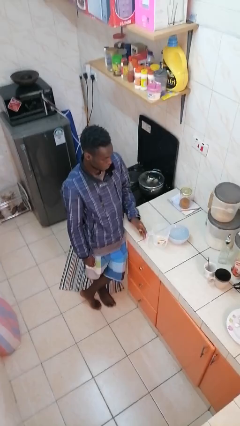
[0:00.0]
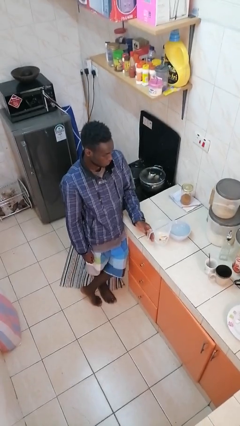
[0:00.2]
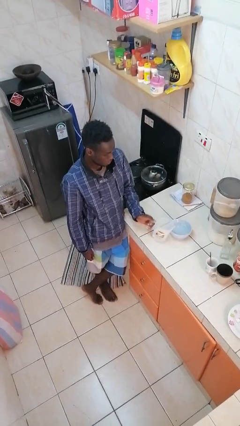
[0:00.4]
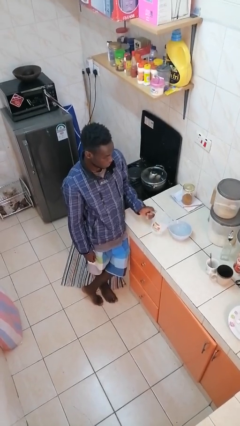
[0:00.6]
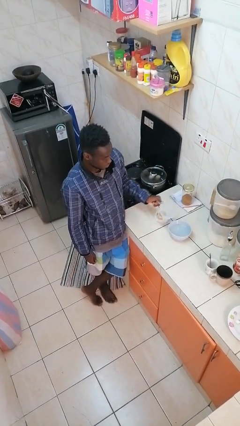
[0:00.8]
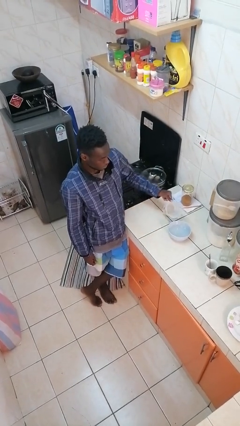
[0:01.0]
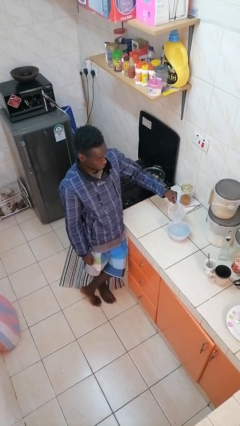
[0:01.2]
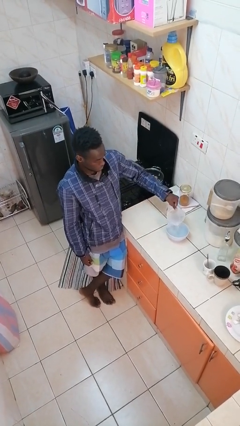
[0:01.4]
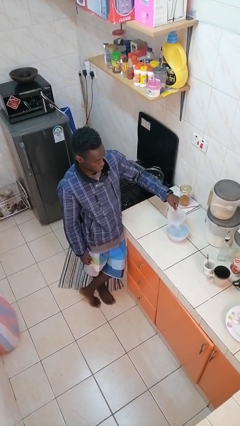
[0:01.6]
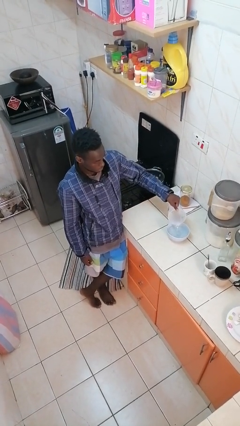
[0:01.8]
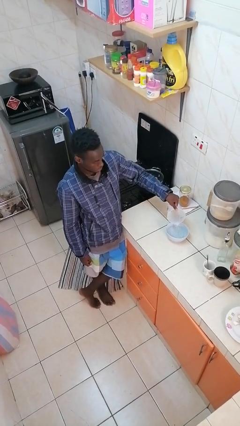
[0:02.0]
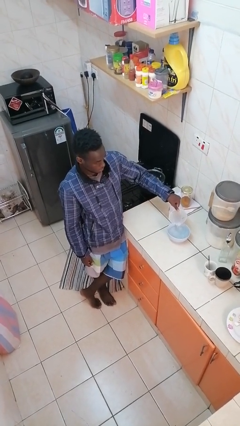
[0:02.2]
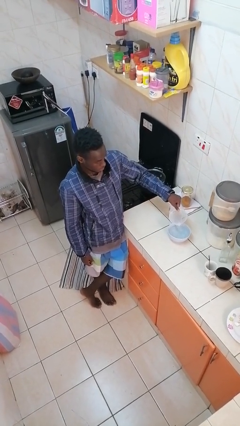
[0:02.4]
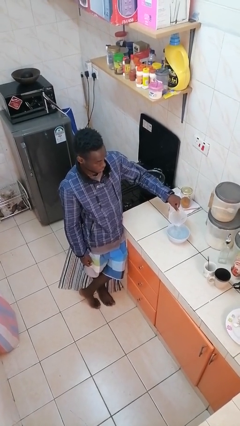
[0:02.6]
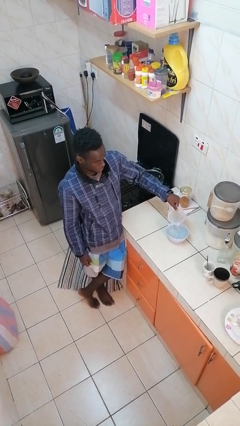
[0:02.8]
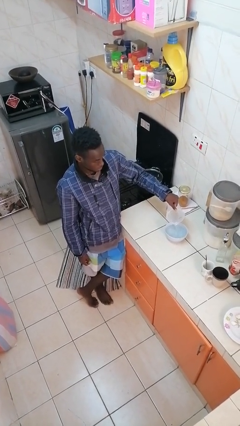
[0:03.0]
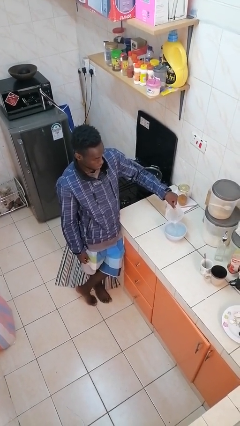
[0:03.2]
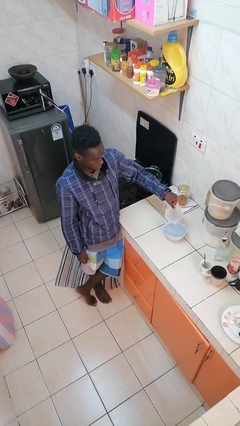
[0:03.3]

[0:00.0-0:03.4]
person pours into bowl

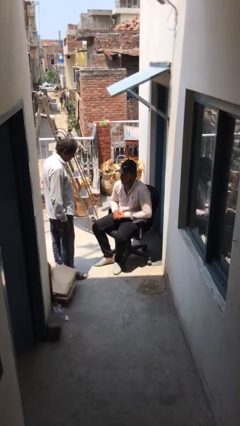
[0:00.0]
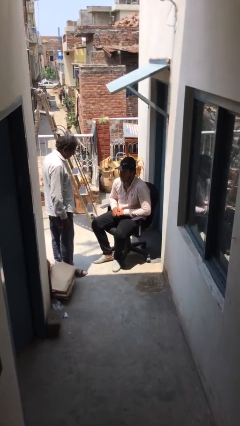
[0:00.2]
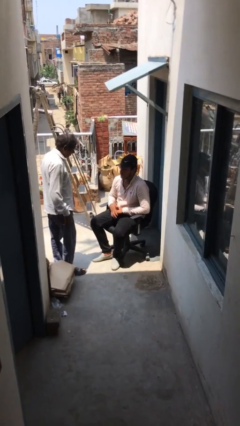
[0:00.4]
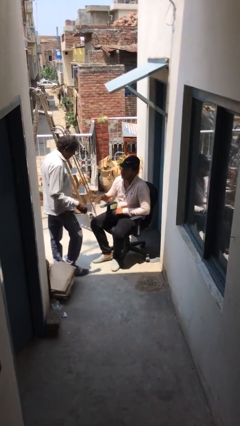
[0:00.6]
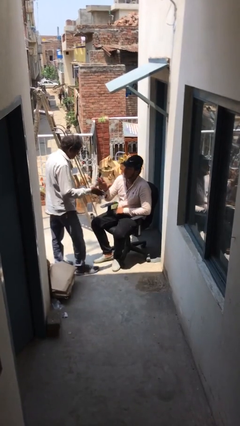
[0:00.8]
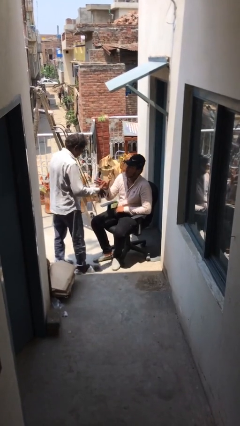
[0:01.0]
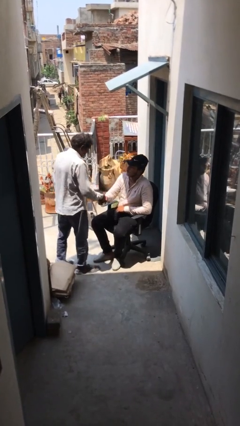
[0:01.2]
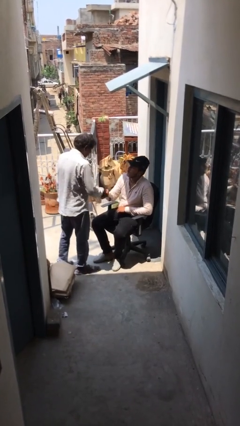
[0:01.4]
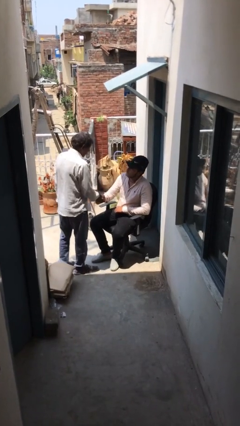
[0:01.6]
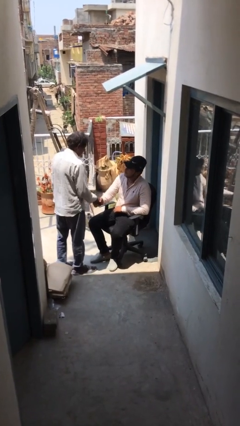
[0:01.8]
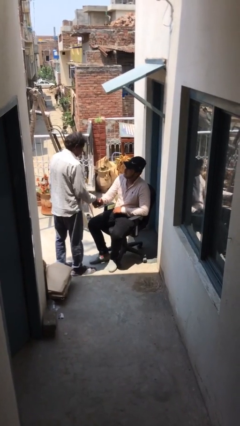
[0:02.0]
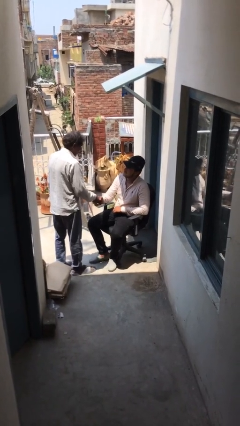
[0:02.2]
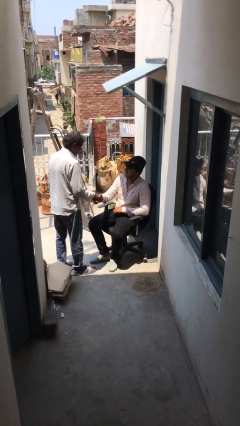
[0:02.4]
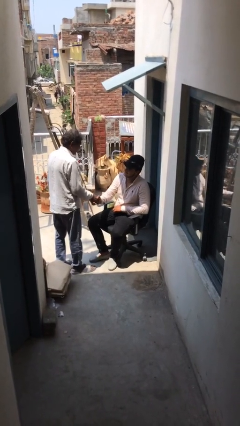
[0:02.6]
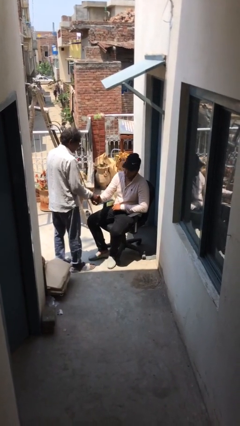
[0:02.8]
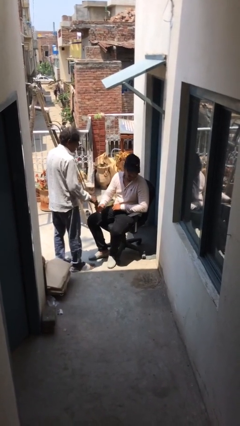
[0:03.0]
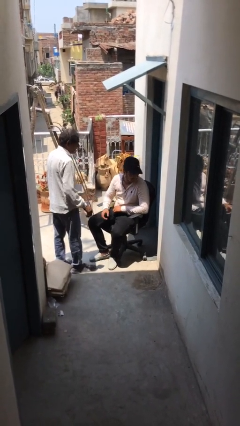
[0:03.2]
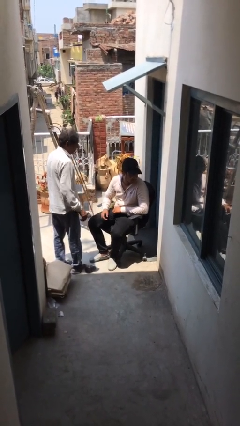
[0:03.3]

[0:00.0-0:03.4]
person shakes hand

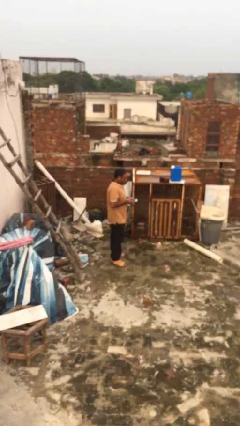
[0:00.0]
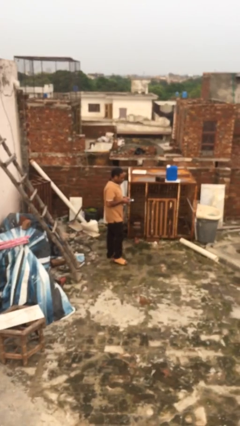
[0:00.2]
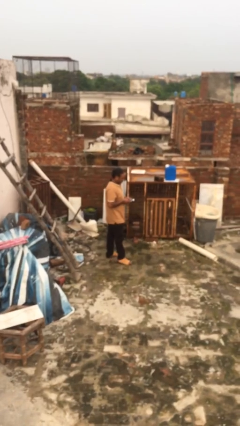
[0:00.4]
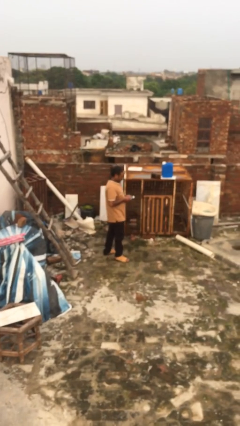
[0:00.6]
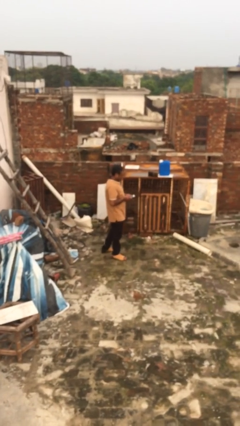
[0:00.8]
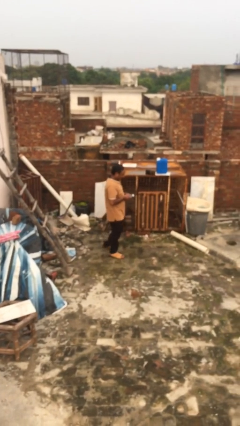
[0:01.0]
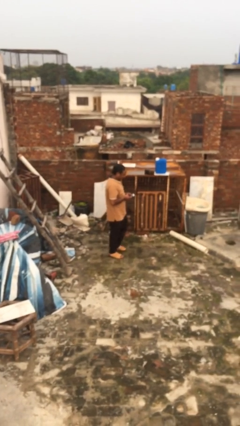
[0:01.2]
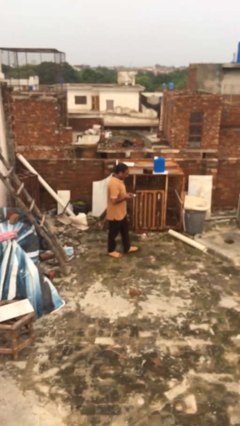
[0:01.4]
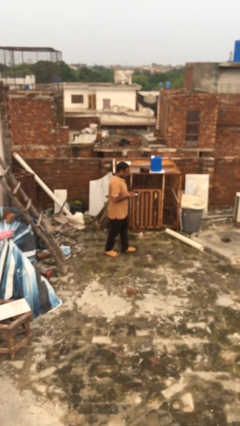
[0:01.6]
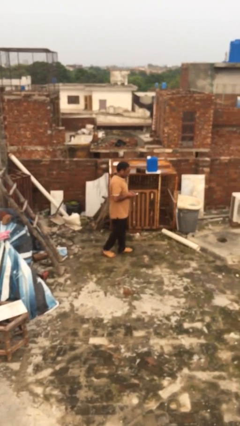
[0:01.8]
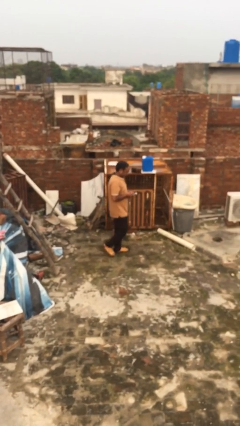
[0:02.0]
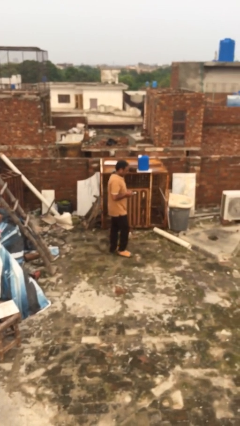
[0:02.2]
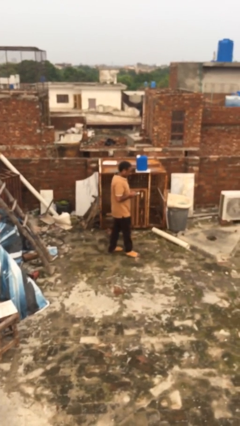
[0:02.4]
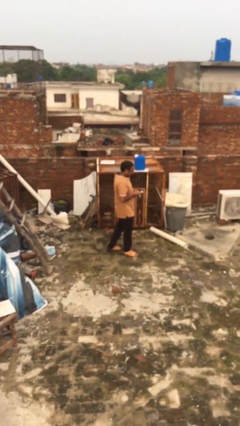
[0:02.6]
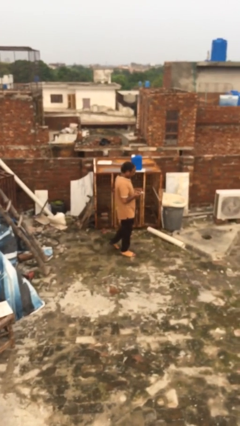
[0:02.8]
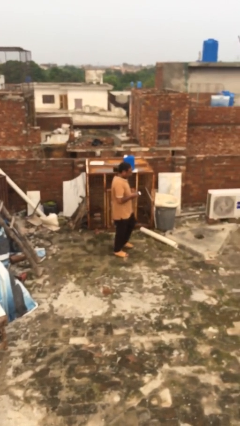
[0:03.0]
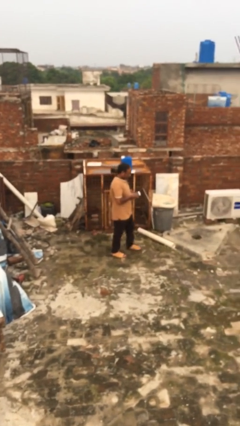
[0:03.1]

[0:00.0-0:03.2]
person texts on phone

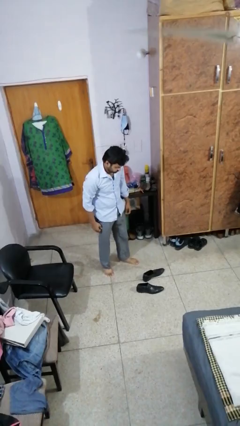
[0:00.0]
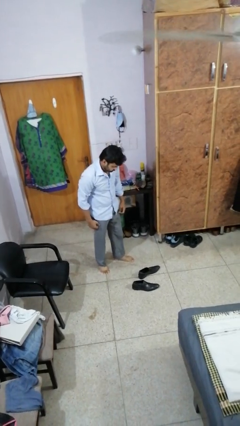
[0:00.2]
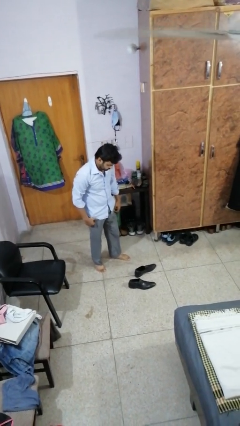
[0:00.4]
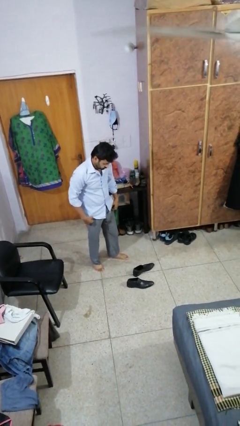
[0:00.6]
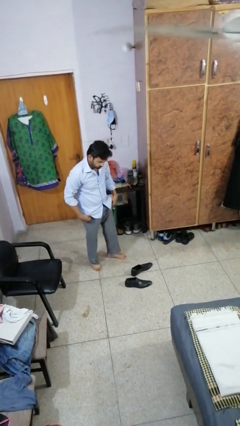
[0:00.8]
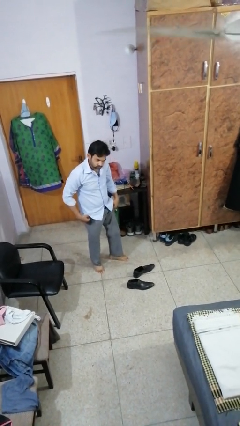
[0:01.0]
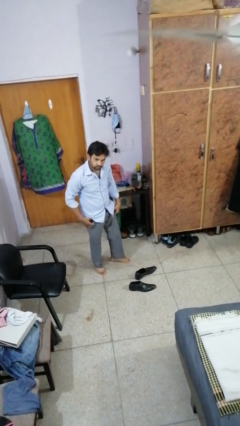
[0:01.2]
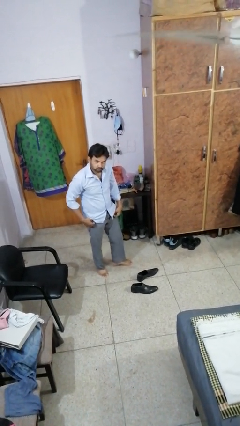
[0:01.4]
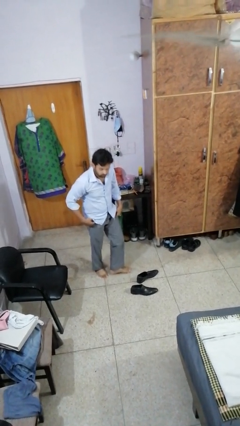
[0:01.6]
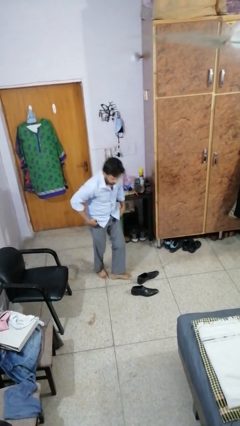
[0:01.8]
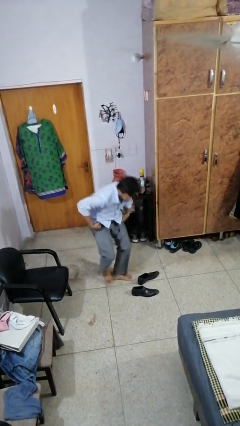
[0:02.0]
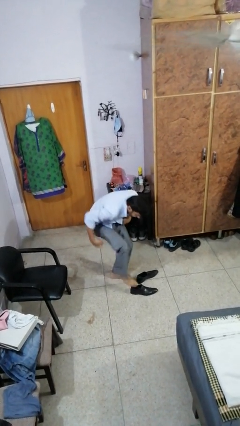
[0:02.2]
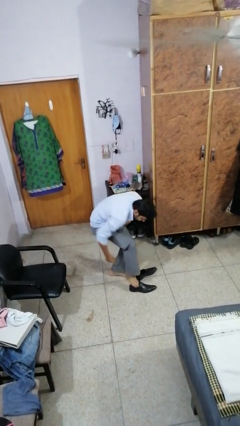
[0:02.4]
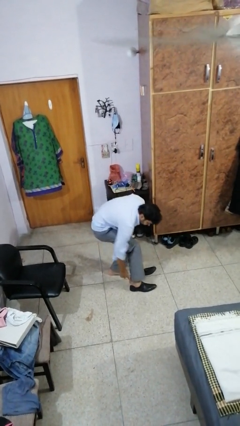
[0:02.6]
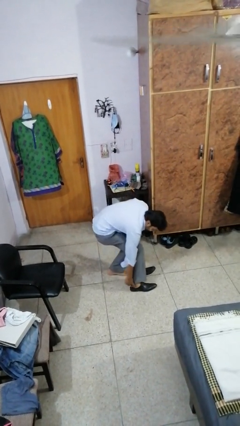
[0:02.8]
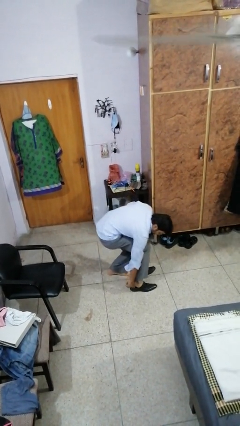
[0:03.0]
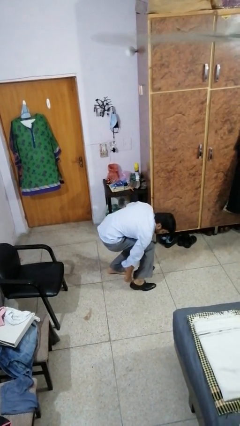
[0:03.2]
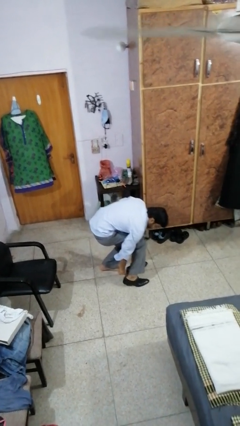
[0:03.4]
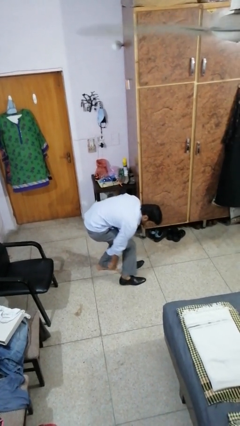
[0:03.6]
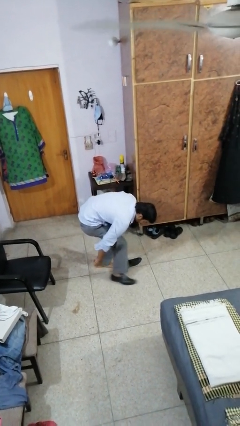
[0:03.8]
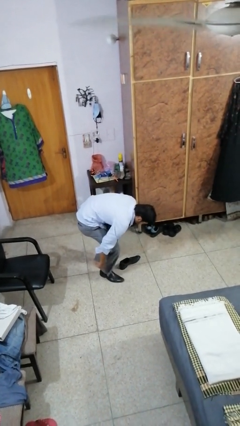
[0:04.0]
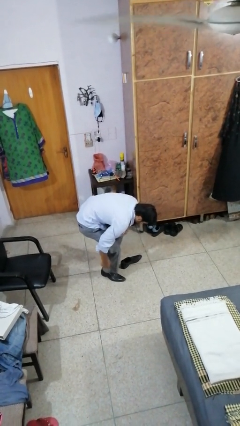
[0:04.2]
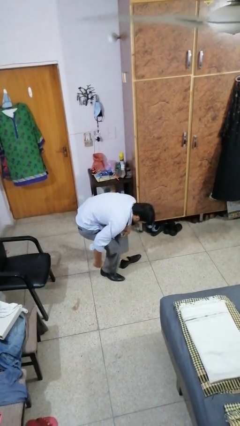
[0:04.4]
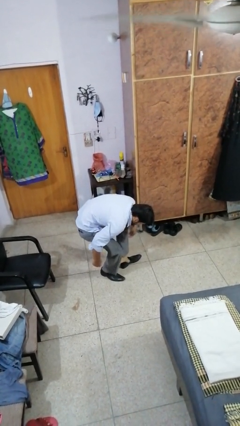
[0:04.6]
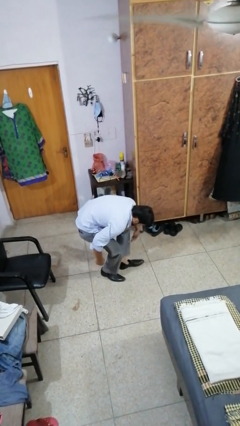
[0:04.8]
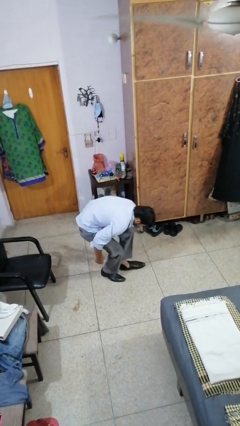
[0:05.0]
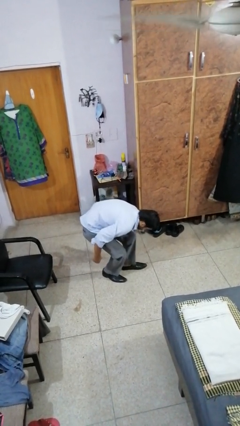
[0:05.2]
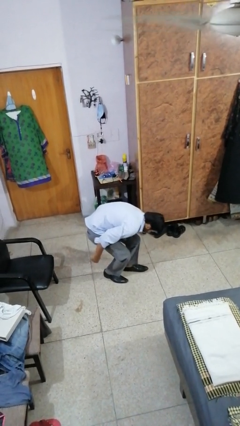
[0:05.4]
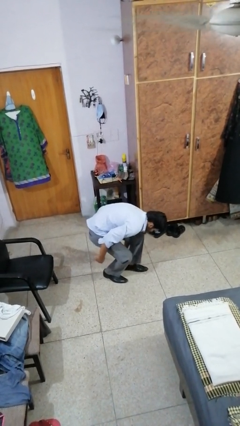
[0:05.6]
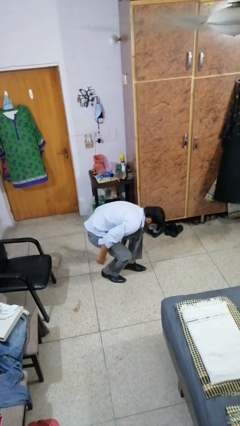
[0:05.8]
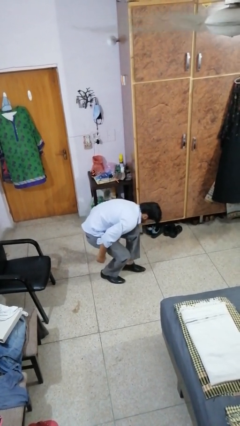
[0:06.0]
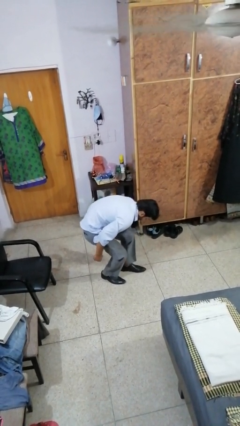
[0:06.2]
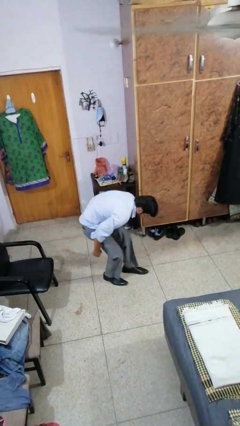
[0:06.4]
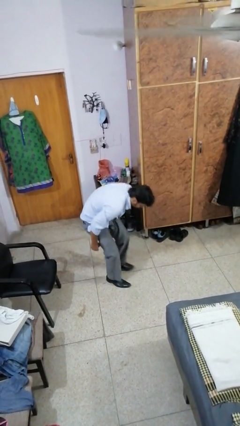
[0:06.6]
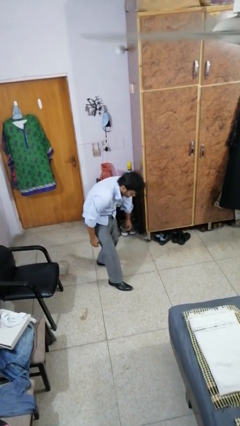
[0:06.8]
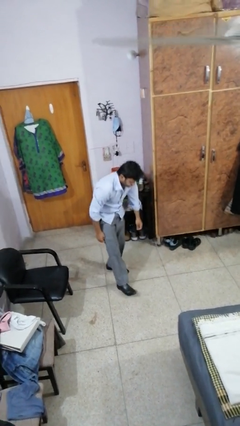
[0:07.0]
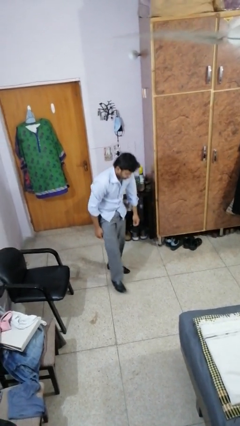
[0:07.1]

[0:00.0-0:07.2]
person puts on shoes

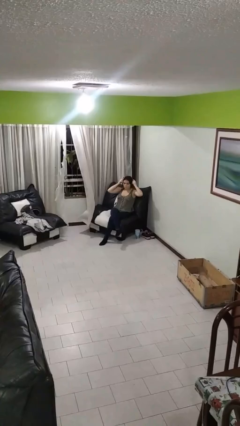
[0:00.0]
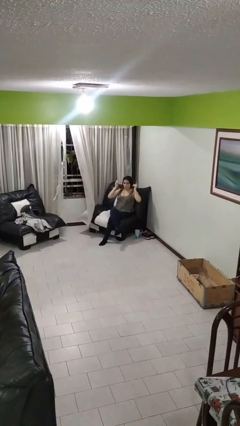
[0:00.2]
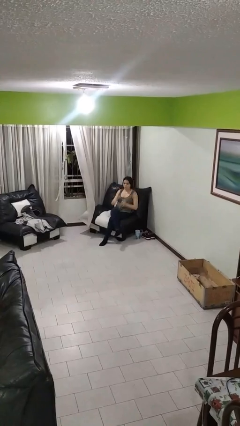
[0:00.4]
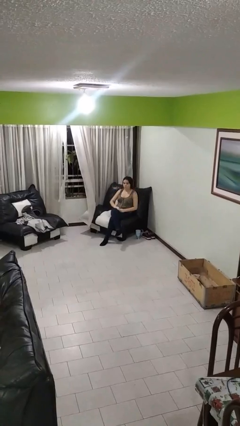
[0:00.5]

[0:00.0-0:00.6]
person puts on headphones
